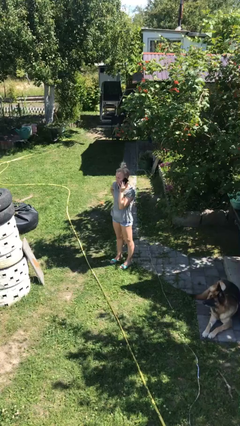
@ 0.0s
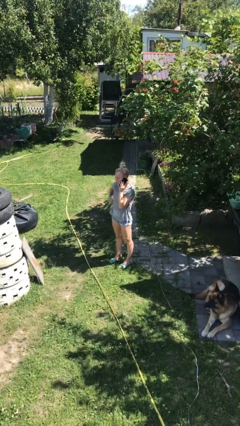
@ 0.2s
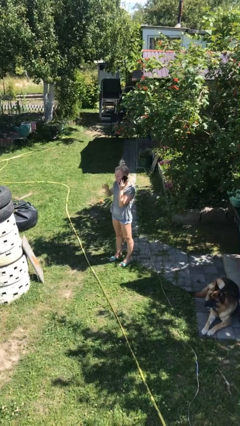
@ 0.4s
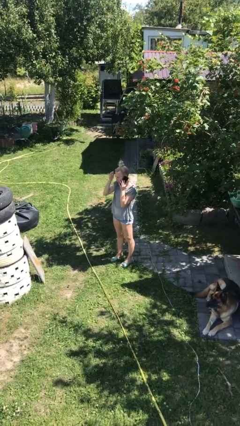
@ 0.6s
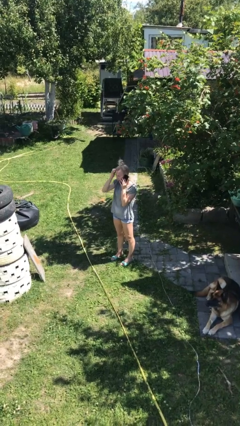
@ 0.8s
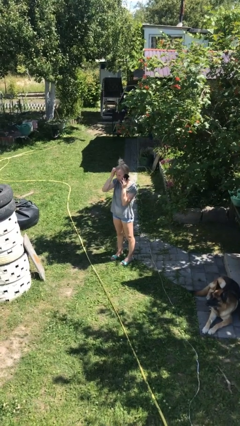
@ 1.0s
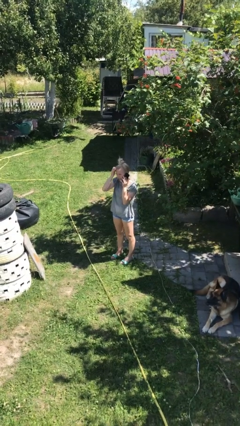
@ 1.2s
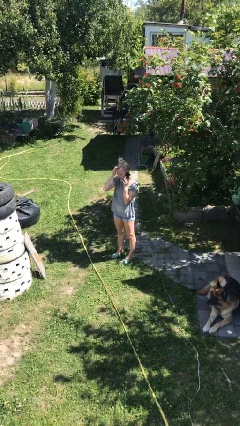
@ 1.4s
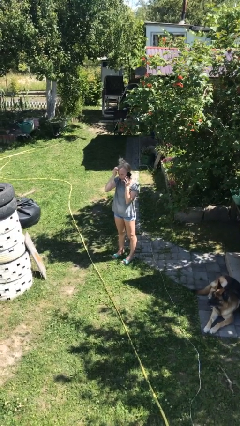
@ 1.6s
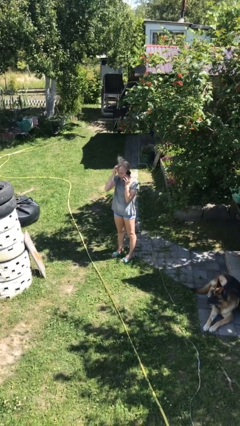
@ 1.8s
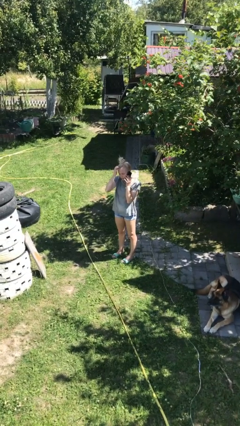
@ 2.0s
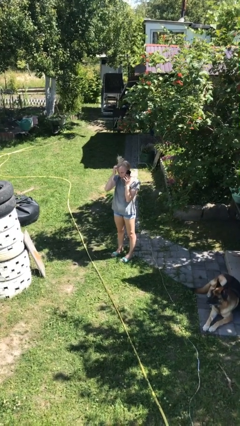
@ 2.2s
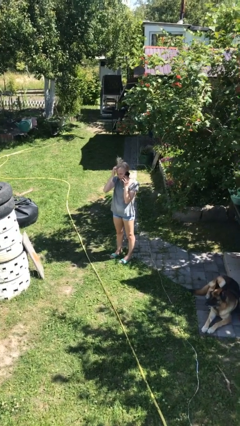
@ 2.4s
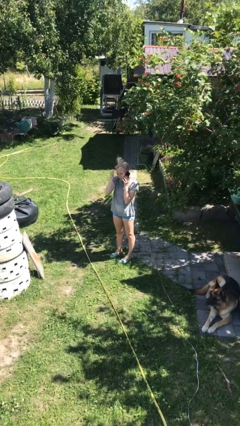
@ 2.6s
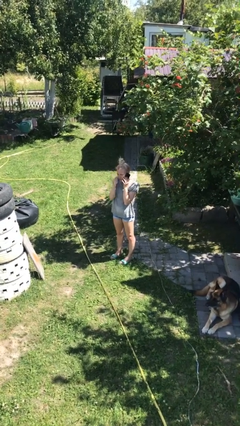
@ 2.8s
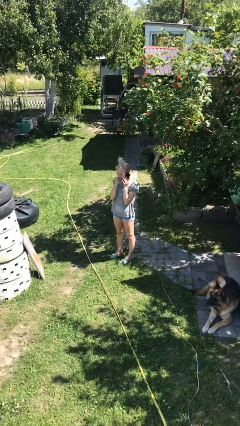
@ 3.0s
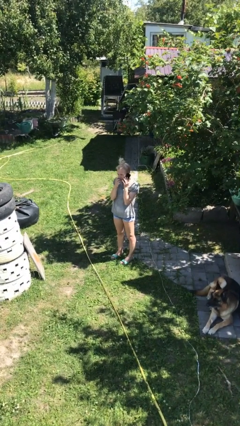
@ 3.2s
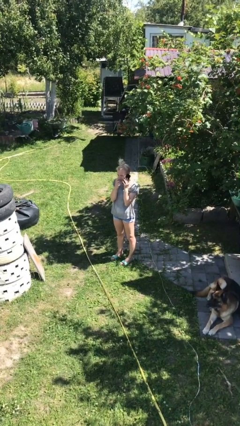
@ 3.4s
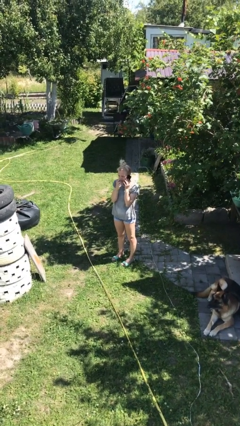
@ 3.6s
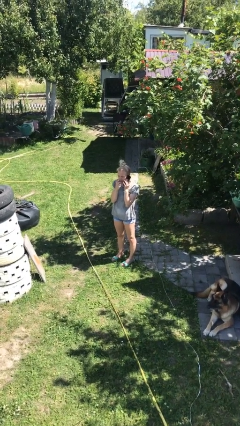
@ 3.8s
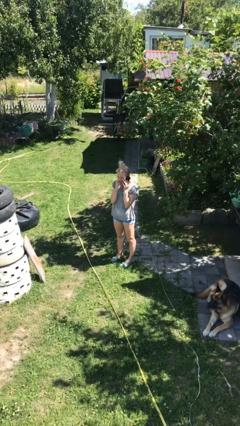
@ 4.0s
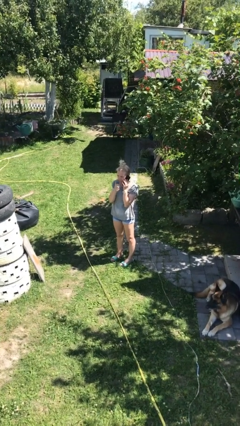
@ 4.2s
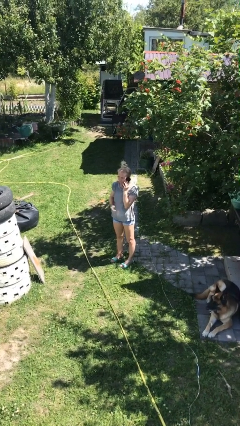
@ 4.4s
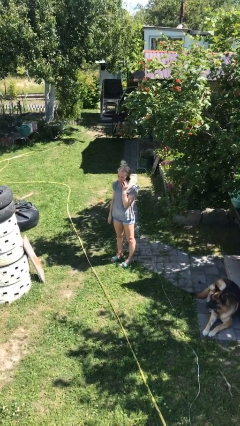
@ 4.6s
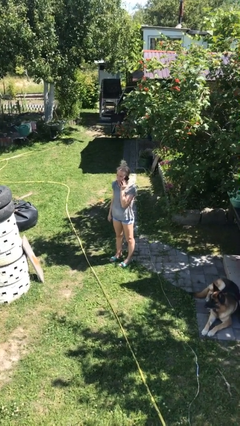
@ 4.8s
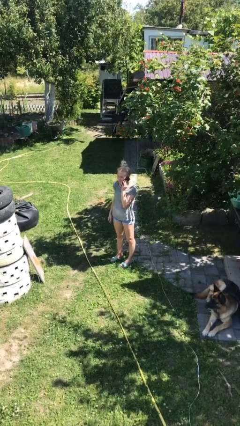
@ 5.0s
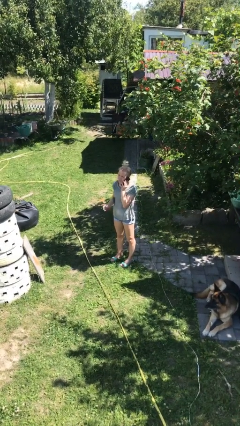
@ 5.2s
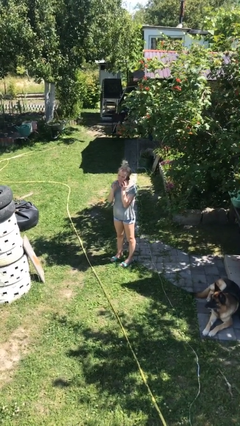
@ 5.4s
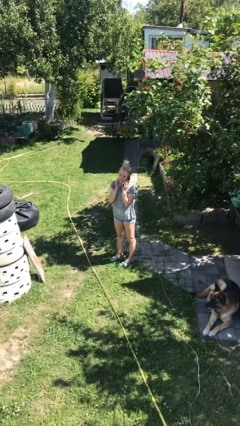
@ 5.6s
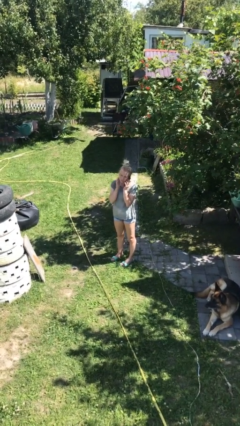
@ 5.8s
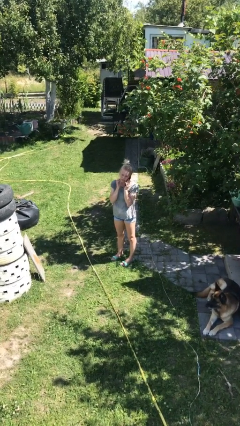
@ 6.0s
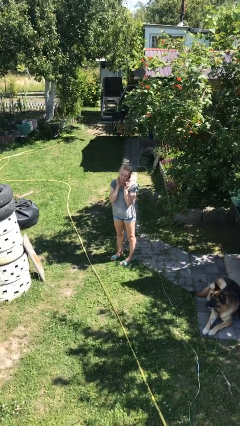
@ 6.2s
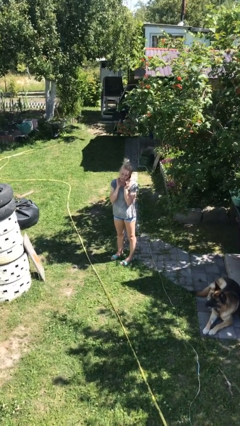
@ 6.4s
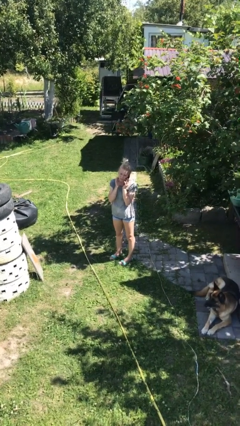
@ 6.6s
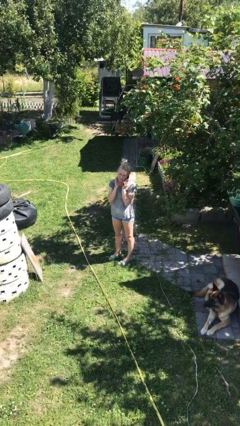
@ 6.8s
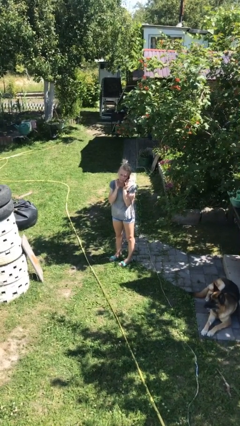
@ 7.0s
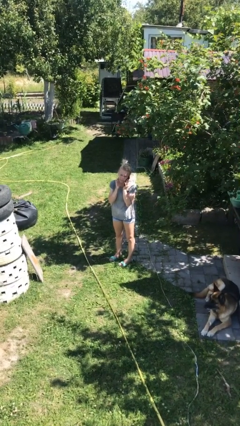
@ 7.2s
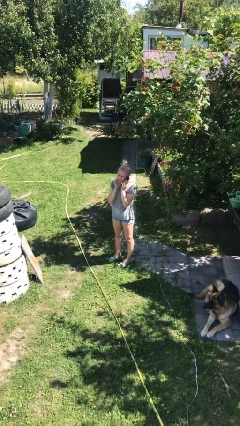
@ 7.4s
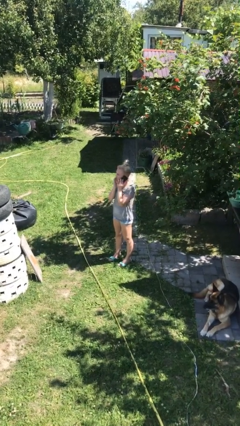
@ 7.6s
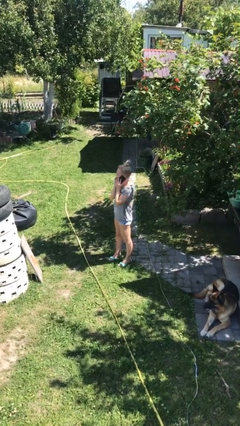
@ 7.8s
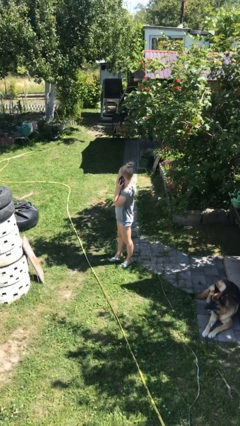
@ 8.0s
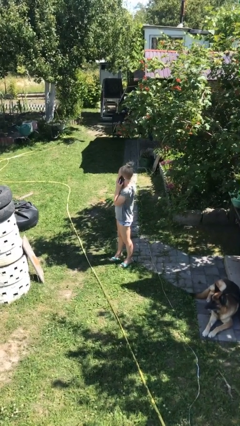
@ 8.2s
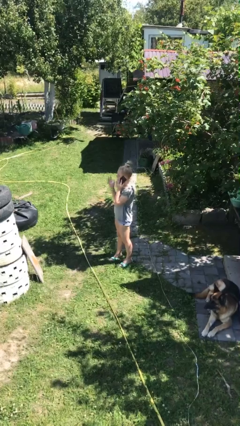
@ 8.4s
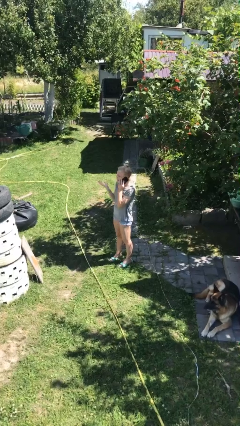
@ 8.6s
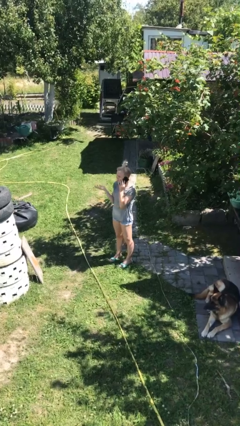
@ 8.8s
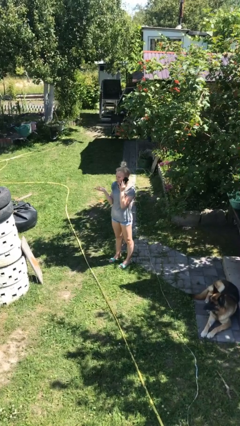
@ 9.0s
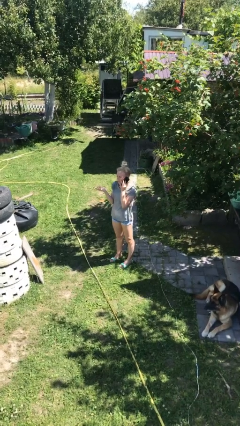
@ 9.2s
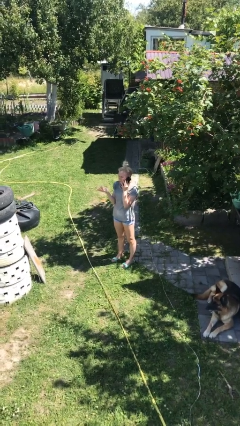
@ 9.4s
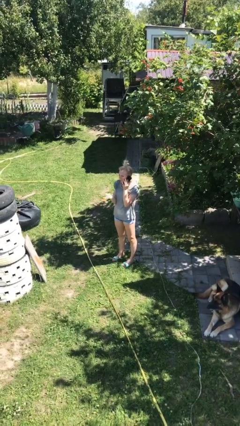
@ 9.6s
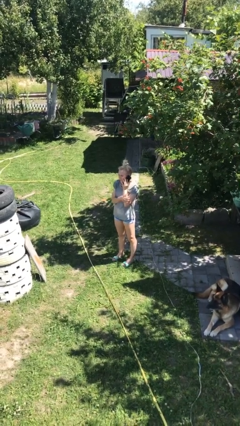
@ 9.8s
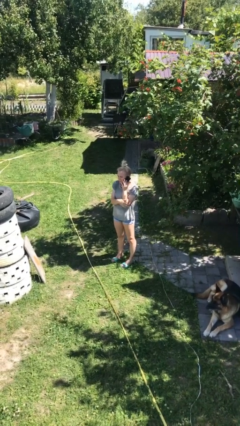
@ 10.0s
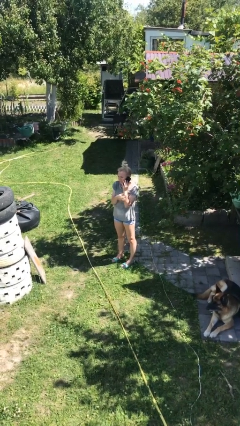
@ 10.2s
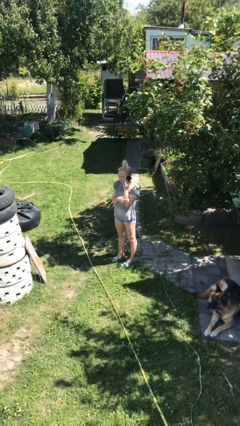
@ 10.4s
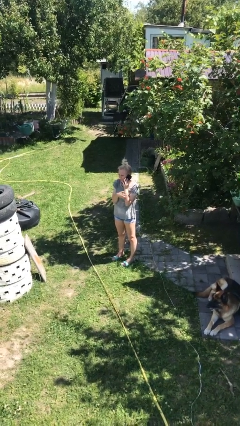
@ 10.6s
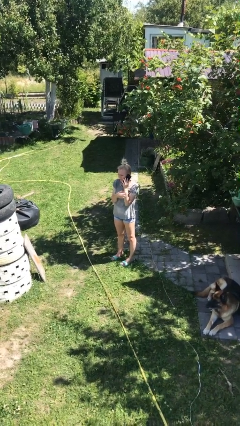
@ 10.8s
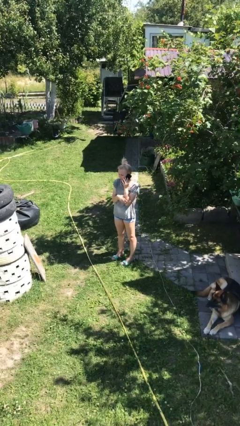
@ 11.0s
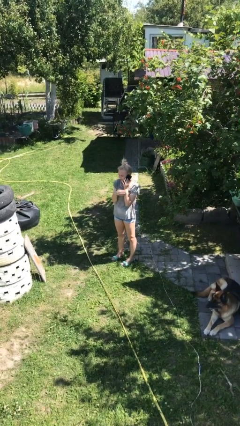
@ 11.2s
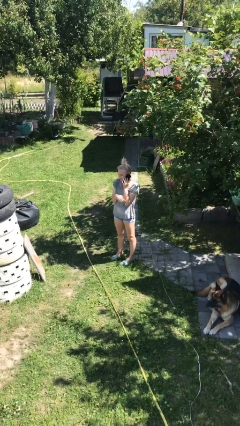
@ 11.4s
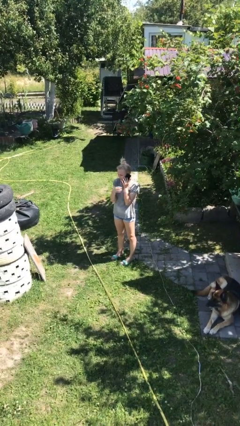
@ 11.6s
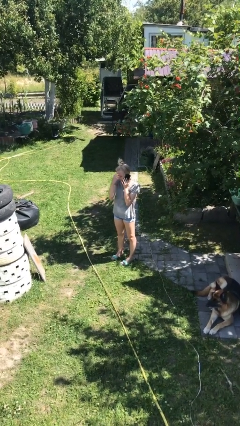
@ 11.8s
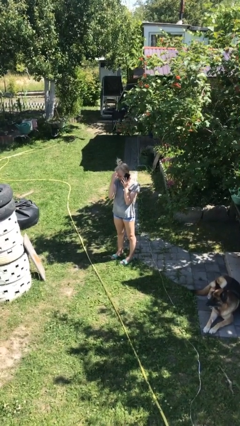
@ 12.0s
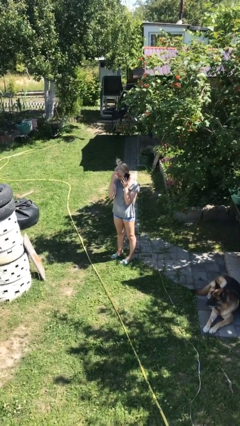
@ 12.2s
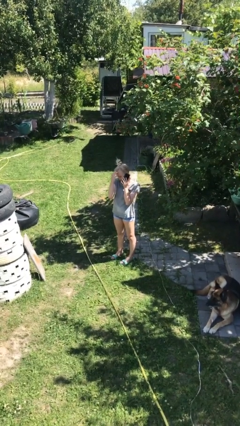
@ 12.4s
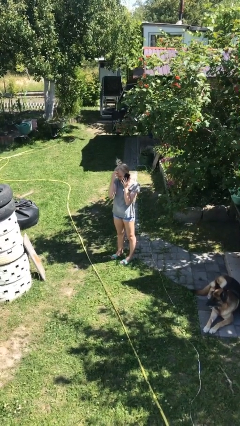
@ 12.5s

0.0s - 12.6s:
person talks on phone

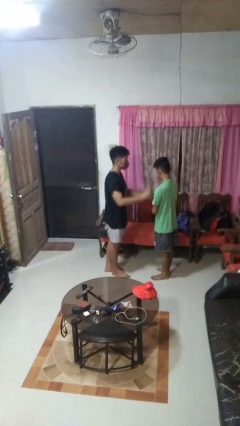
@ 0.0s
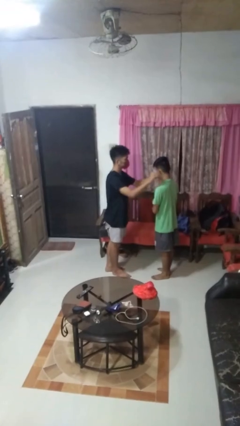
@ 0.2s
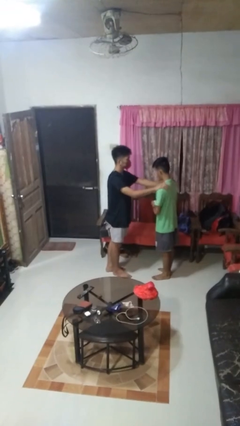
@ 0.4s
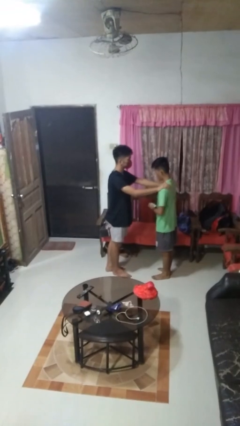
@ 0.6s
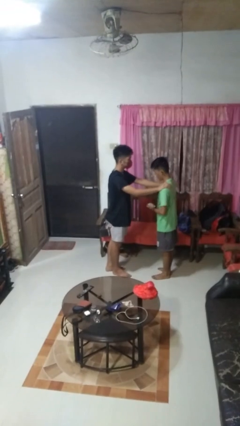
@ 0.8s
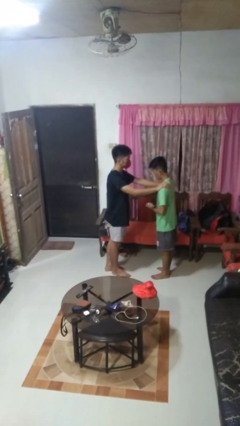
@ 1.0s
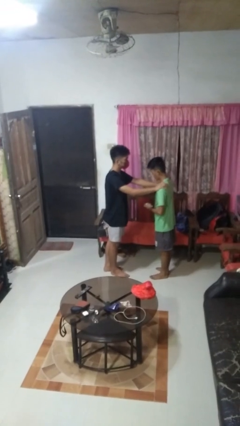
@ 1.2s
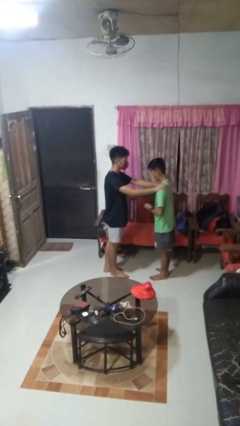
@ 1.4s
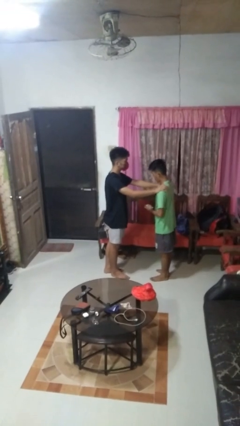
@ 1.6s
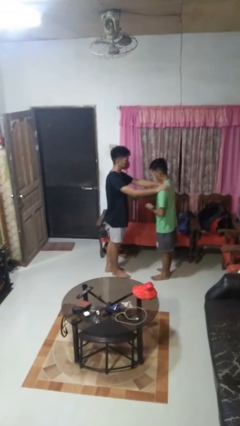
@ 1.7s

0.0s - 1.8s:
person grabs person by shoulder

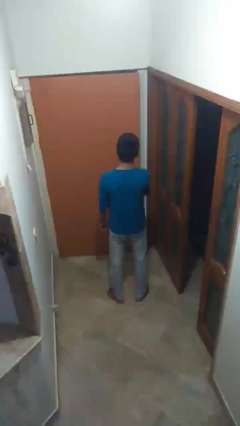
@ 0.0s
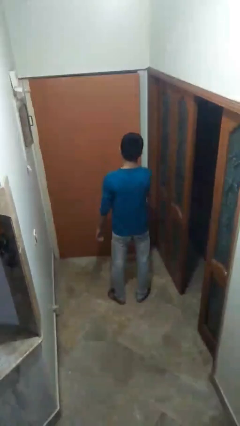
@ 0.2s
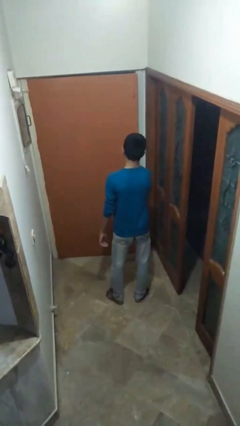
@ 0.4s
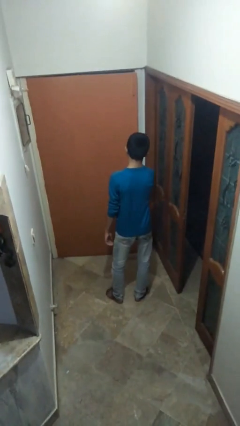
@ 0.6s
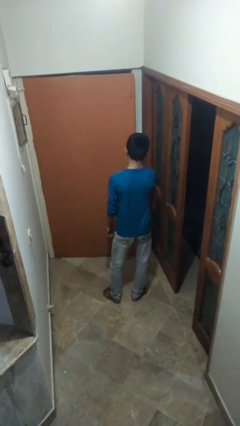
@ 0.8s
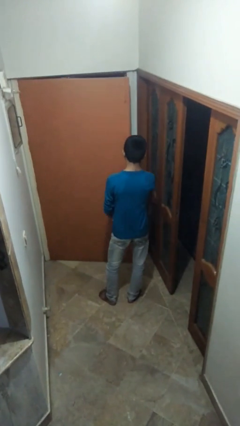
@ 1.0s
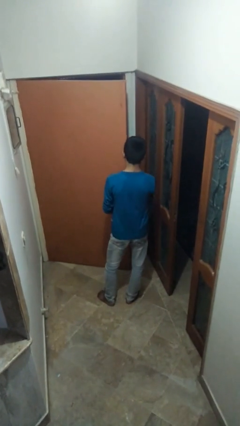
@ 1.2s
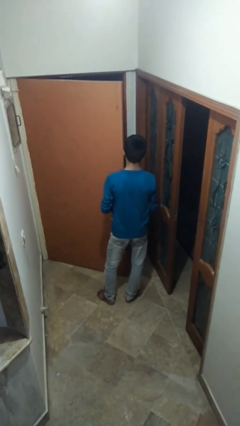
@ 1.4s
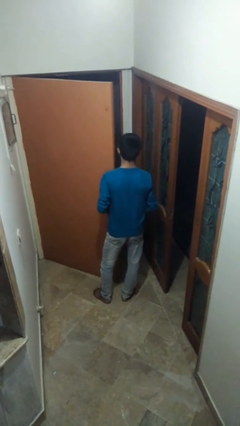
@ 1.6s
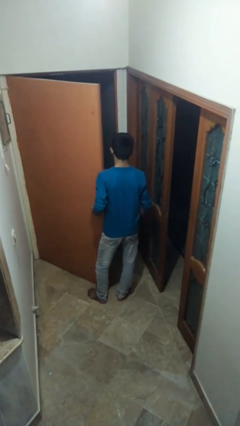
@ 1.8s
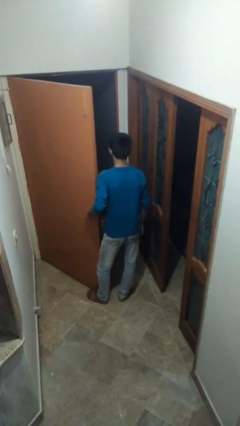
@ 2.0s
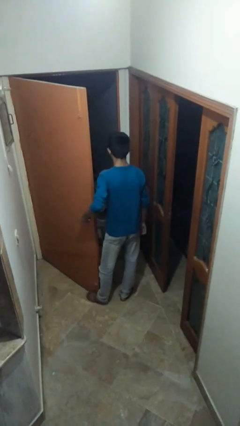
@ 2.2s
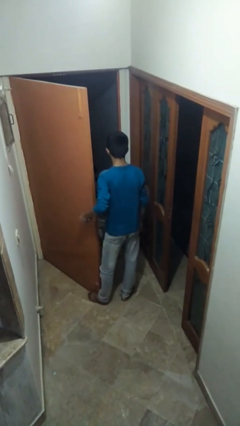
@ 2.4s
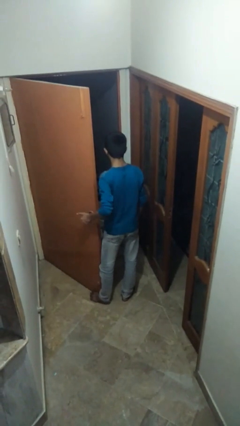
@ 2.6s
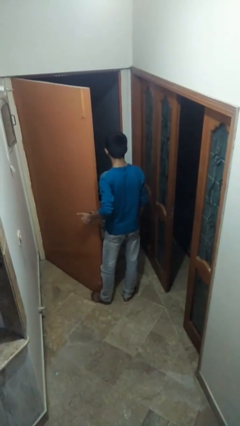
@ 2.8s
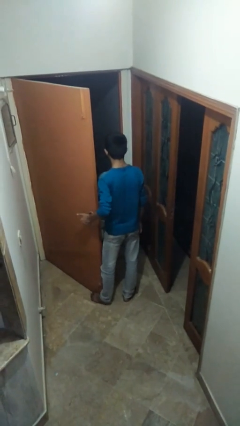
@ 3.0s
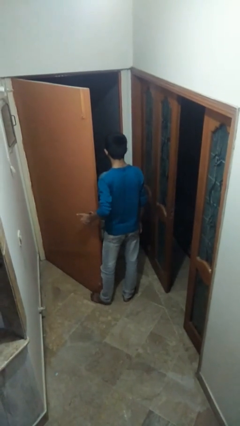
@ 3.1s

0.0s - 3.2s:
person opens facility door

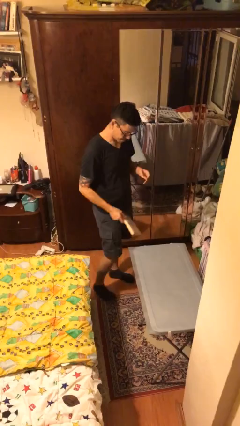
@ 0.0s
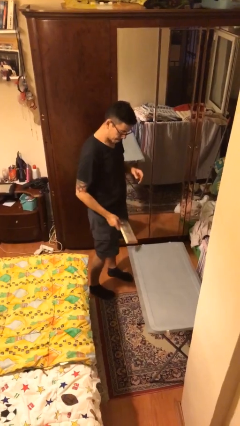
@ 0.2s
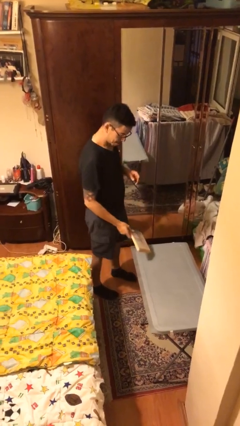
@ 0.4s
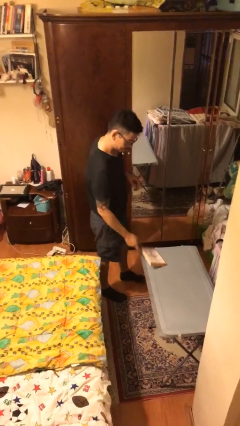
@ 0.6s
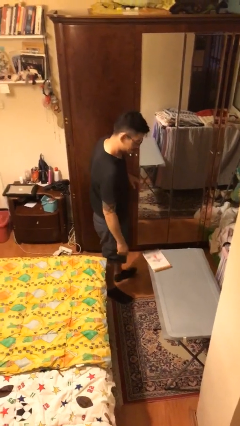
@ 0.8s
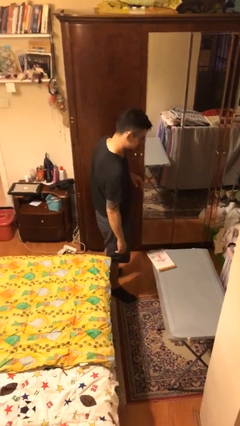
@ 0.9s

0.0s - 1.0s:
person puts down object on table
